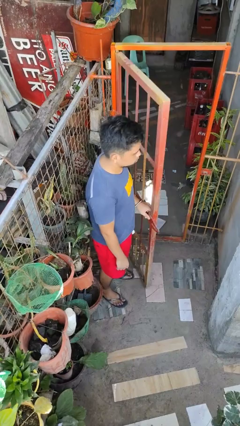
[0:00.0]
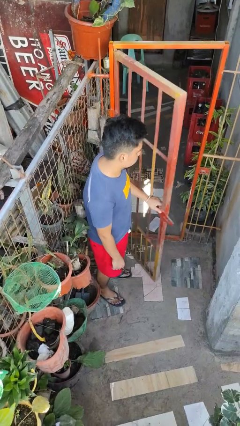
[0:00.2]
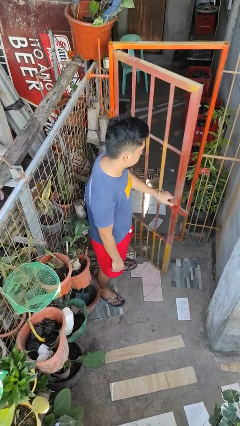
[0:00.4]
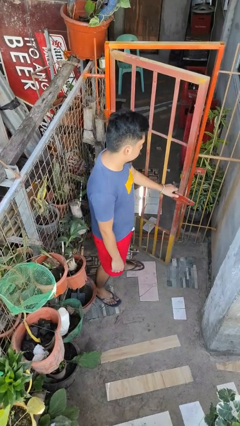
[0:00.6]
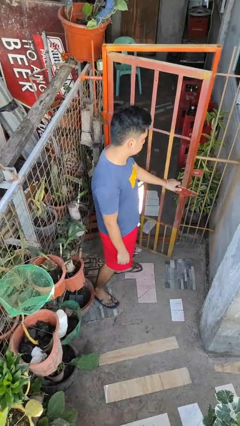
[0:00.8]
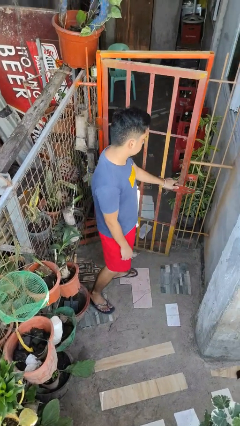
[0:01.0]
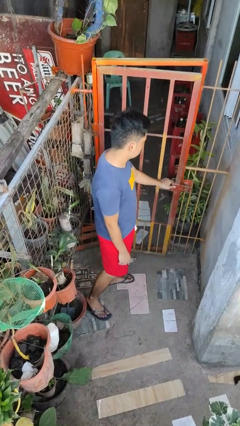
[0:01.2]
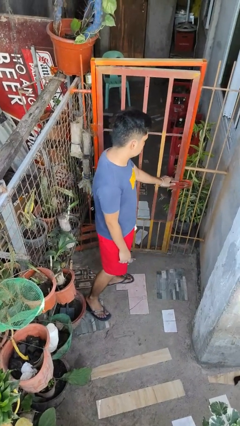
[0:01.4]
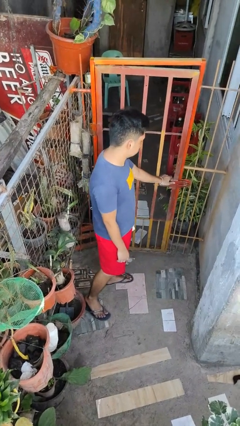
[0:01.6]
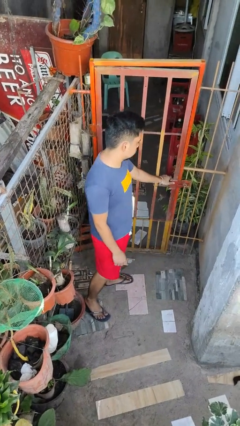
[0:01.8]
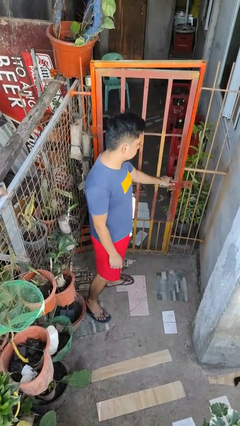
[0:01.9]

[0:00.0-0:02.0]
person closes gate

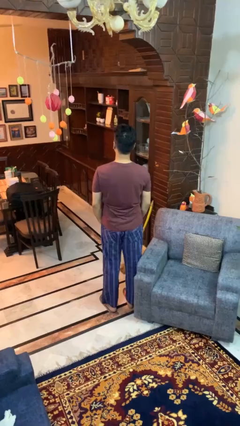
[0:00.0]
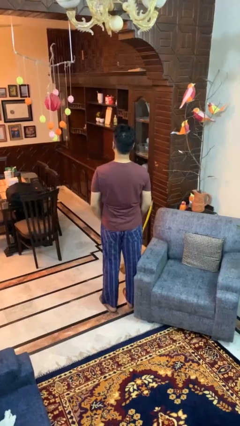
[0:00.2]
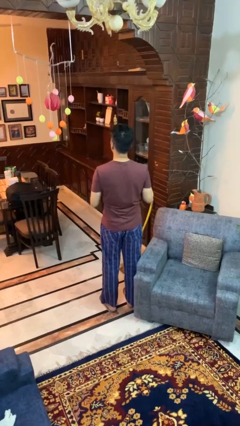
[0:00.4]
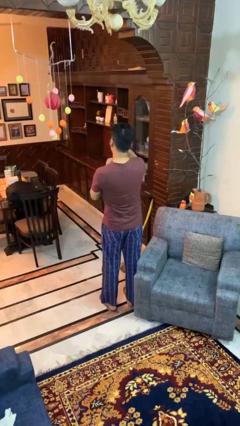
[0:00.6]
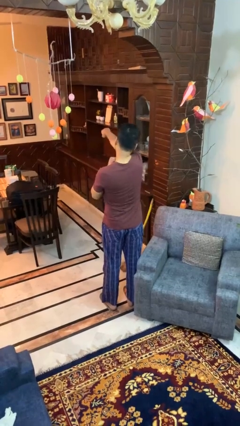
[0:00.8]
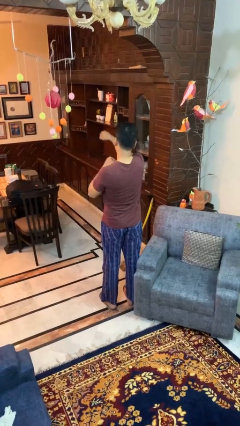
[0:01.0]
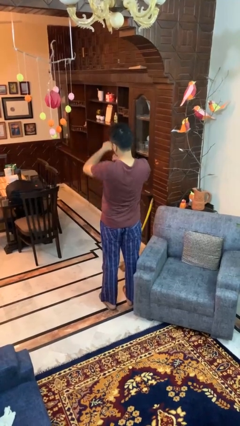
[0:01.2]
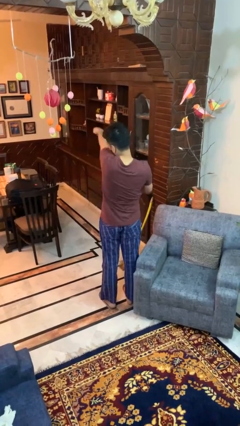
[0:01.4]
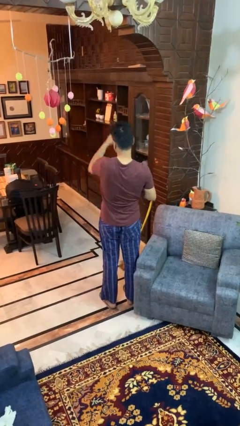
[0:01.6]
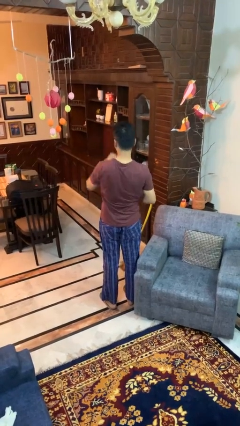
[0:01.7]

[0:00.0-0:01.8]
person punches

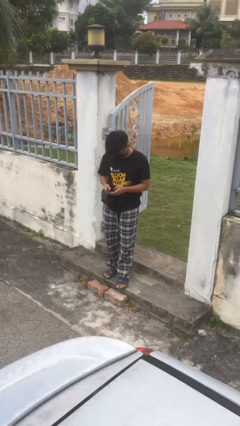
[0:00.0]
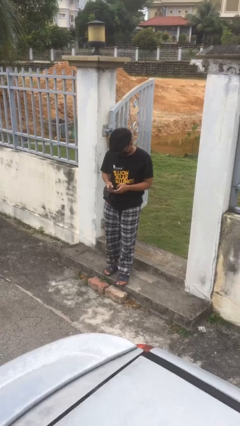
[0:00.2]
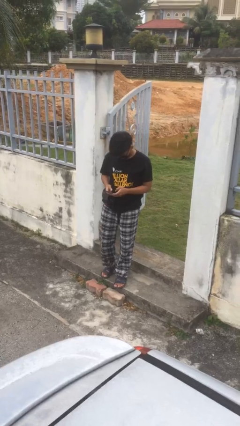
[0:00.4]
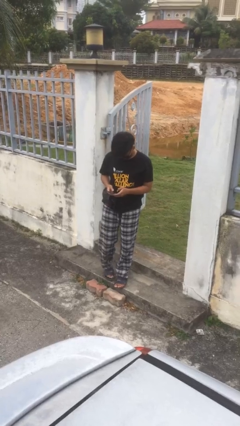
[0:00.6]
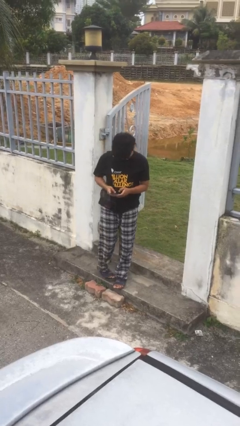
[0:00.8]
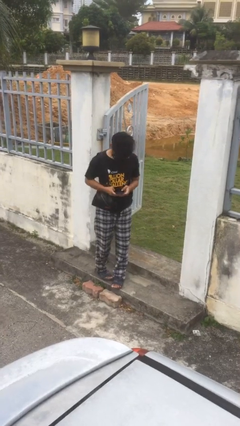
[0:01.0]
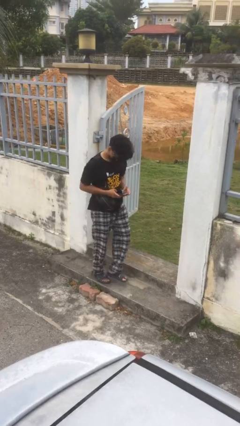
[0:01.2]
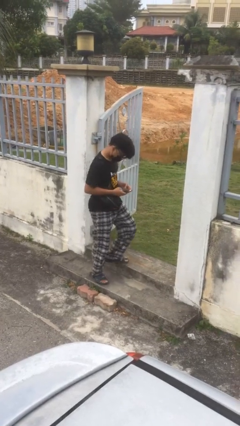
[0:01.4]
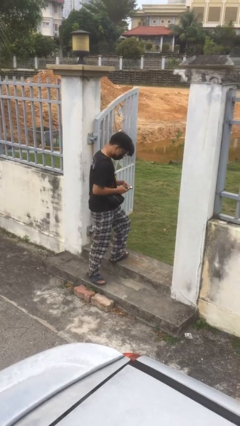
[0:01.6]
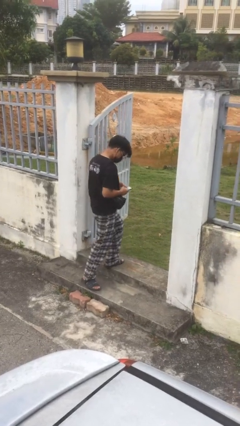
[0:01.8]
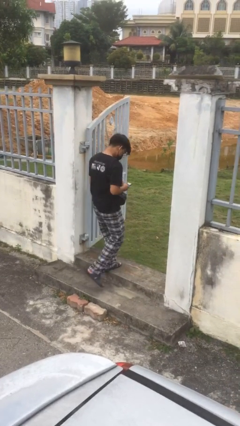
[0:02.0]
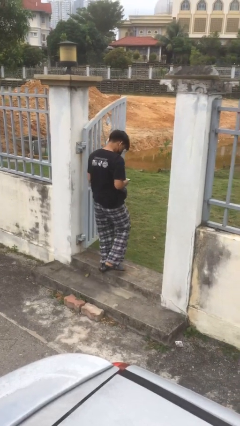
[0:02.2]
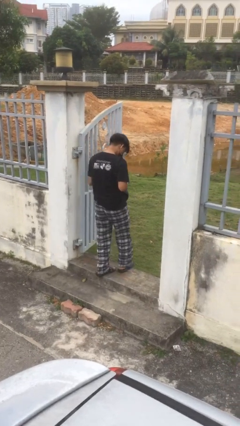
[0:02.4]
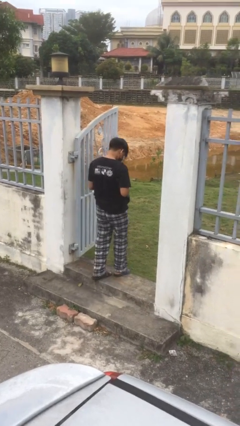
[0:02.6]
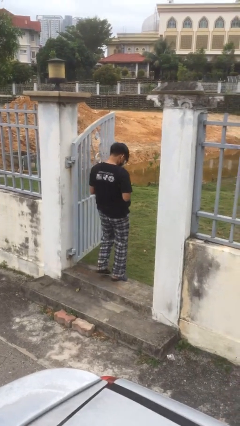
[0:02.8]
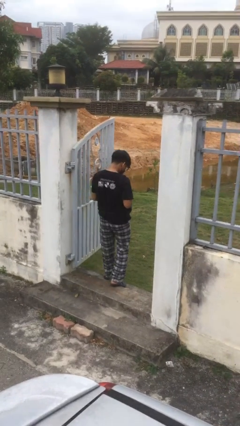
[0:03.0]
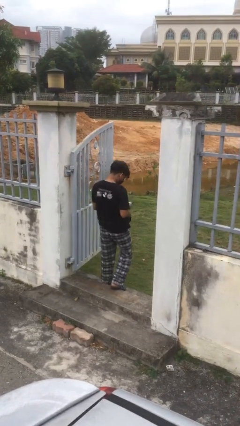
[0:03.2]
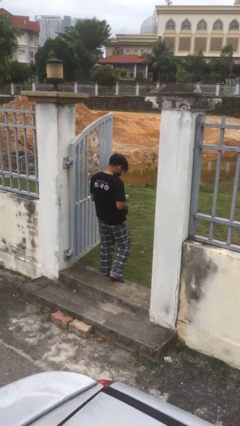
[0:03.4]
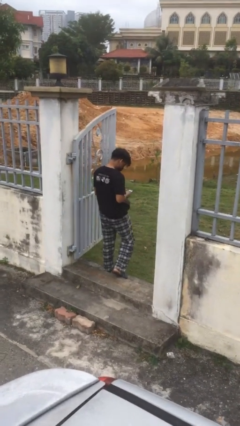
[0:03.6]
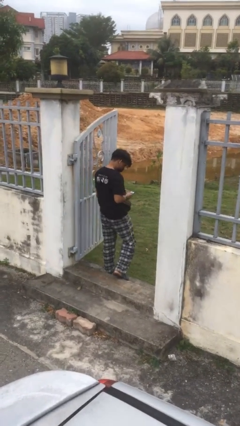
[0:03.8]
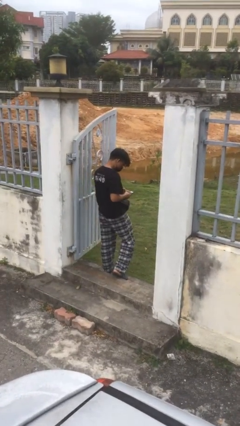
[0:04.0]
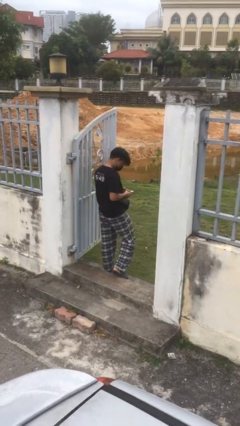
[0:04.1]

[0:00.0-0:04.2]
person exits scene through structure

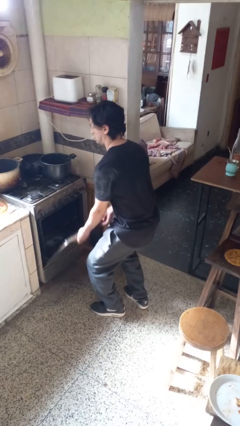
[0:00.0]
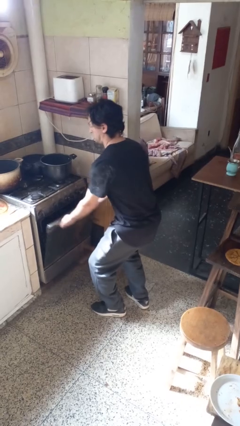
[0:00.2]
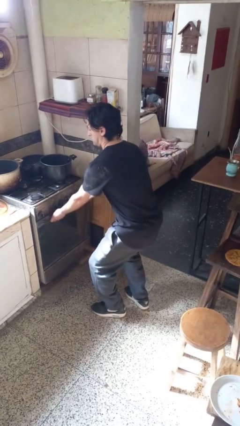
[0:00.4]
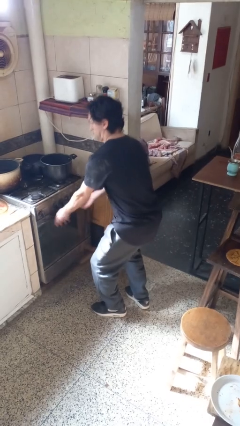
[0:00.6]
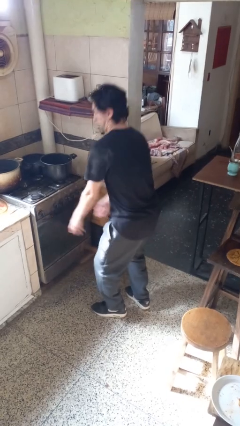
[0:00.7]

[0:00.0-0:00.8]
person closes oven door

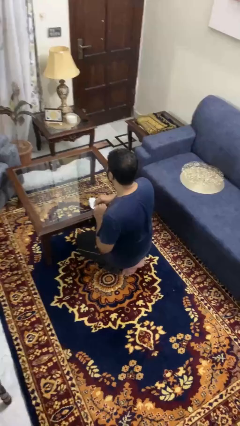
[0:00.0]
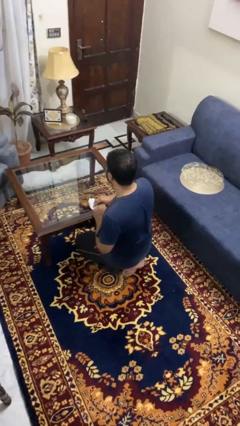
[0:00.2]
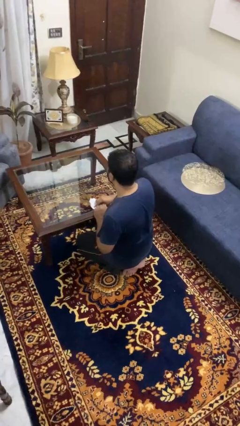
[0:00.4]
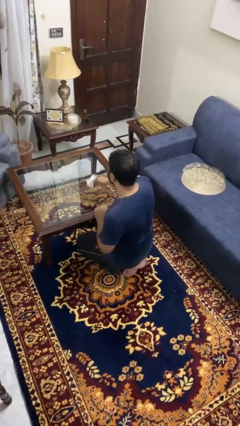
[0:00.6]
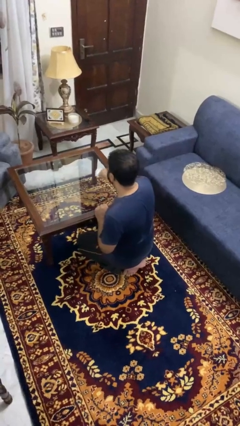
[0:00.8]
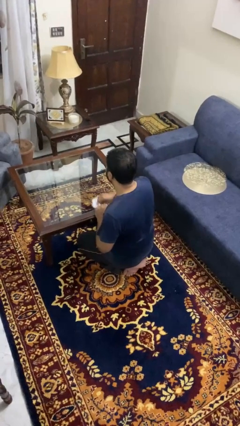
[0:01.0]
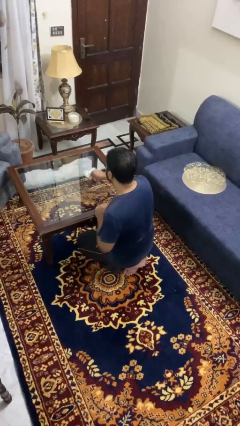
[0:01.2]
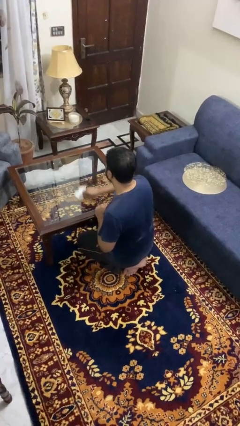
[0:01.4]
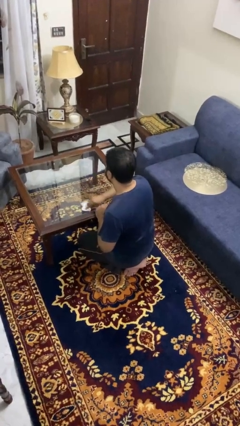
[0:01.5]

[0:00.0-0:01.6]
person cleans table with rag

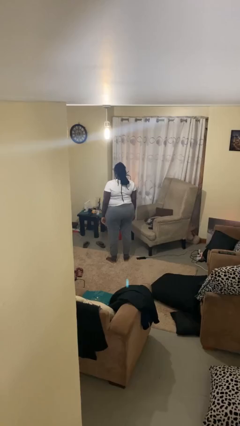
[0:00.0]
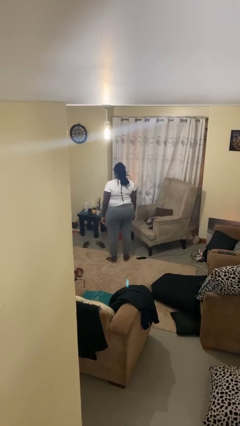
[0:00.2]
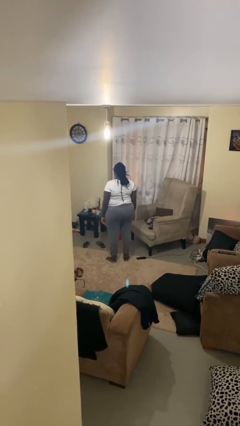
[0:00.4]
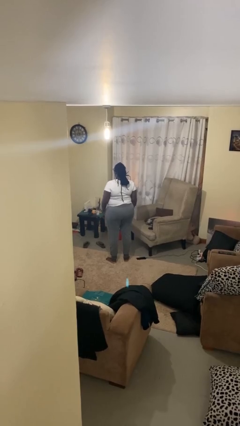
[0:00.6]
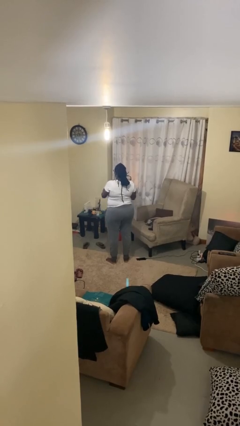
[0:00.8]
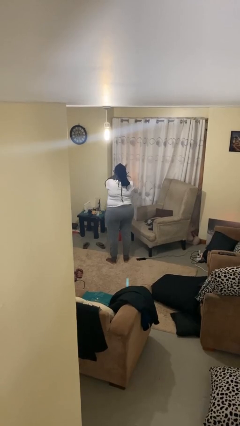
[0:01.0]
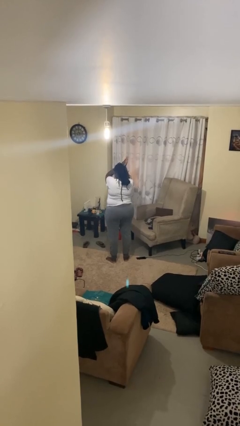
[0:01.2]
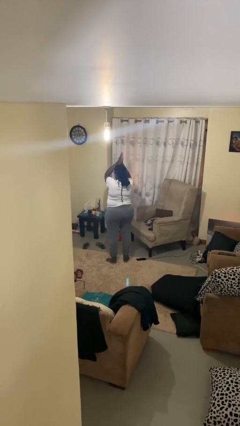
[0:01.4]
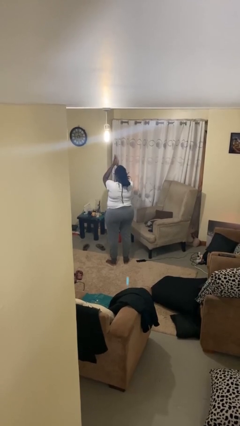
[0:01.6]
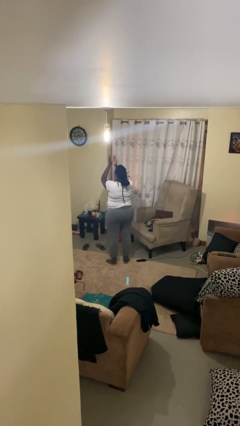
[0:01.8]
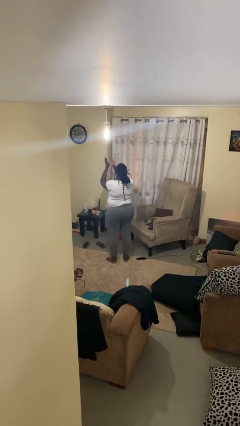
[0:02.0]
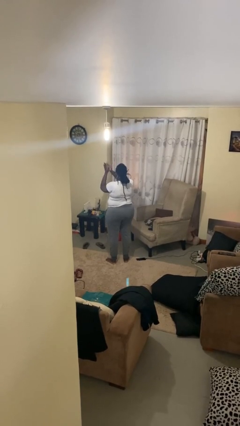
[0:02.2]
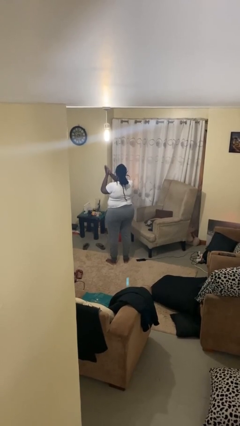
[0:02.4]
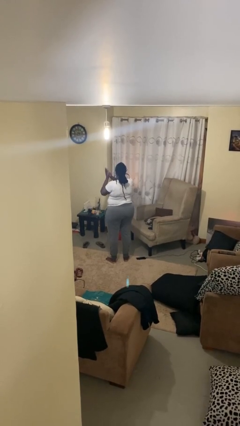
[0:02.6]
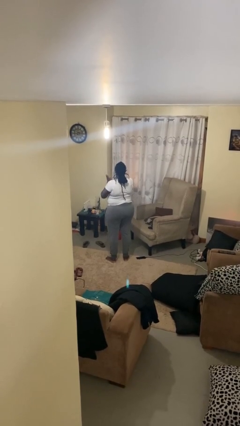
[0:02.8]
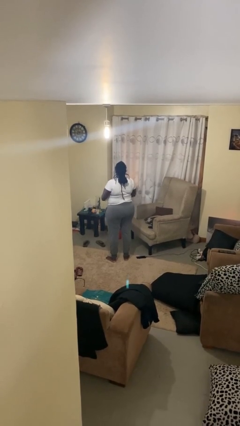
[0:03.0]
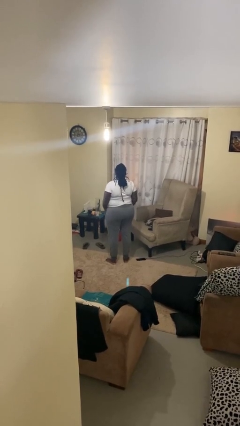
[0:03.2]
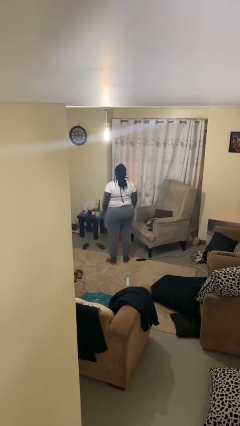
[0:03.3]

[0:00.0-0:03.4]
person claps hands

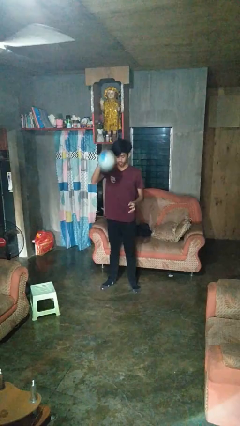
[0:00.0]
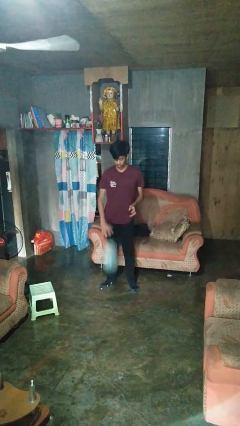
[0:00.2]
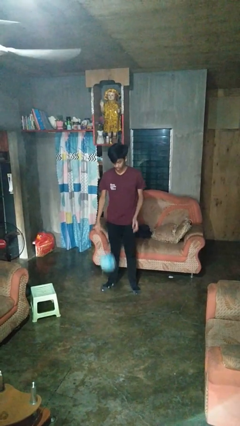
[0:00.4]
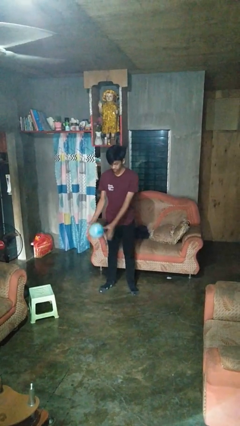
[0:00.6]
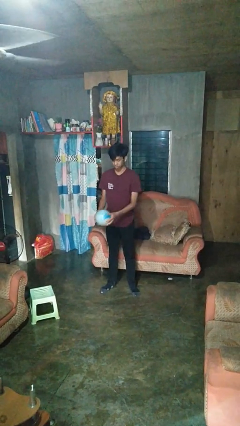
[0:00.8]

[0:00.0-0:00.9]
person bounces ball on floor

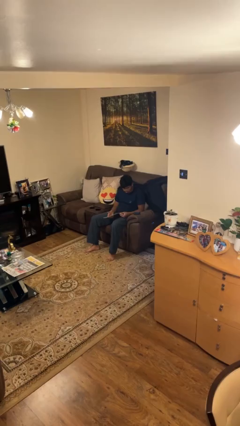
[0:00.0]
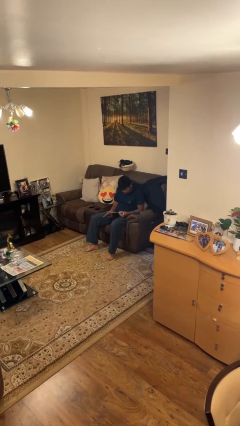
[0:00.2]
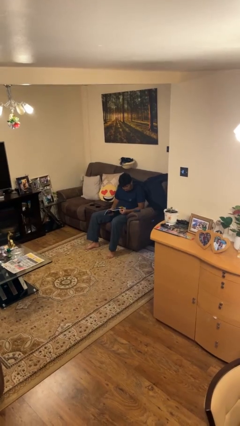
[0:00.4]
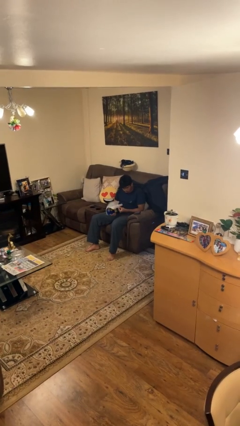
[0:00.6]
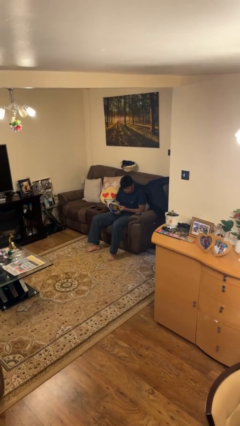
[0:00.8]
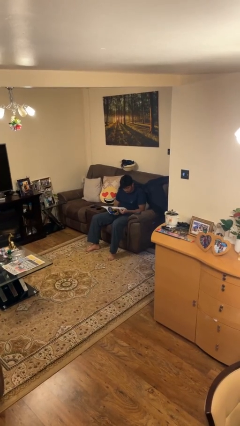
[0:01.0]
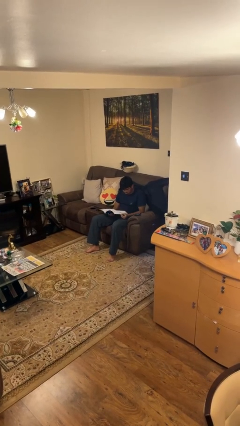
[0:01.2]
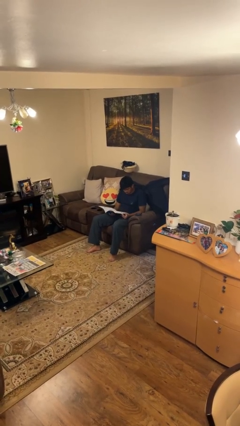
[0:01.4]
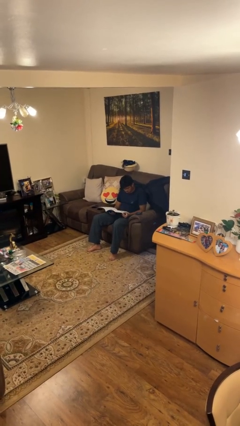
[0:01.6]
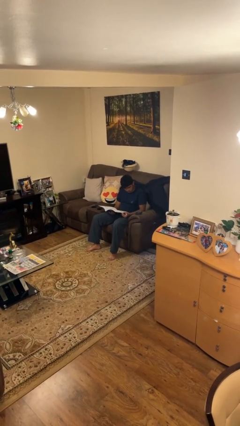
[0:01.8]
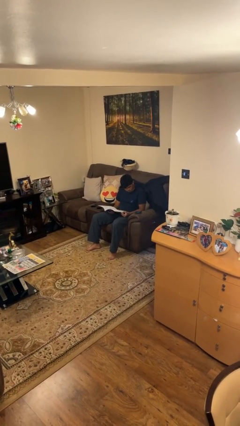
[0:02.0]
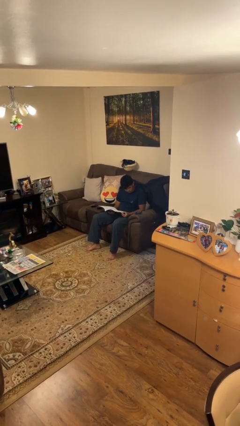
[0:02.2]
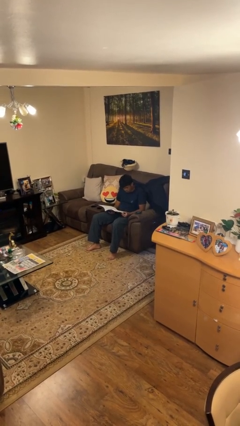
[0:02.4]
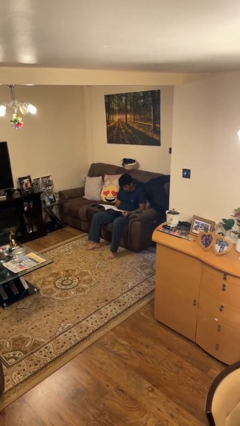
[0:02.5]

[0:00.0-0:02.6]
person reads magazine
